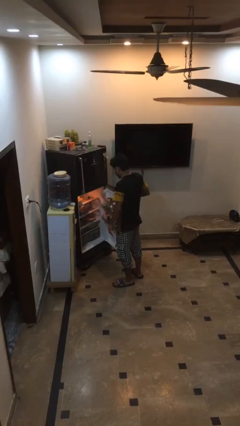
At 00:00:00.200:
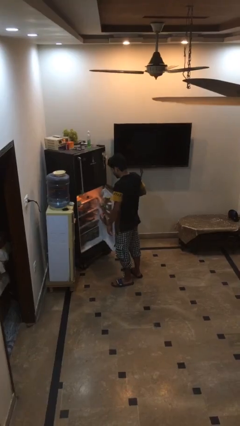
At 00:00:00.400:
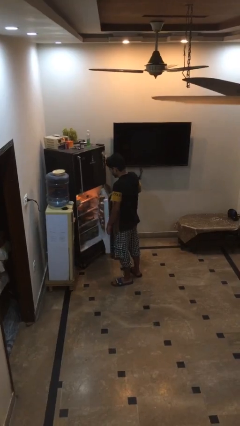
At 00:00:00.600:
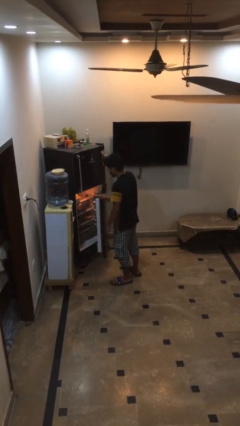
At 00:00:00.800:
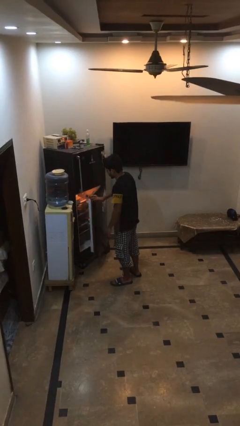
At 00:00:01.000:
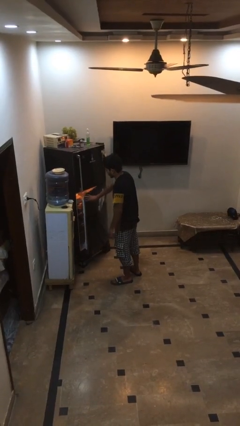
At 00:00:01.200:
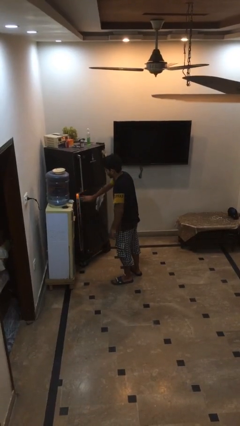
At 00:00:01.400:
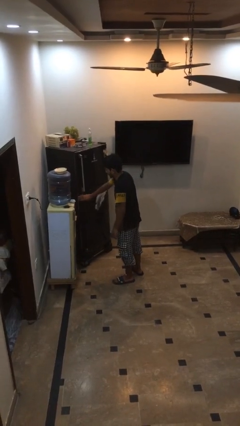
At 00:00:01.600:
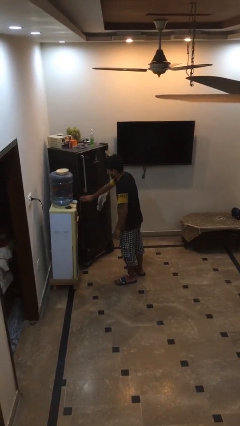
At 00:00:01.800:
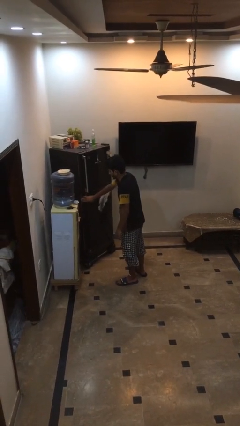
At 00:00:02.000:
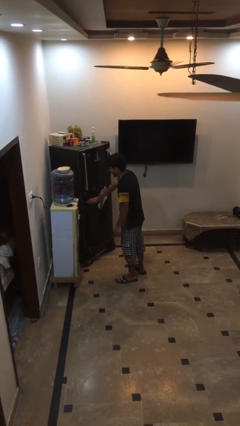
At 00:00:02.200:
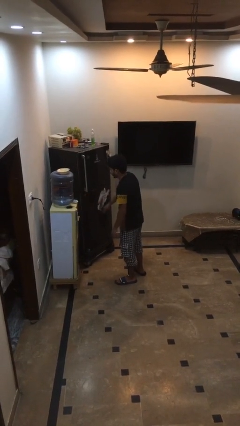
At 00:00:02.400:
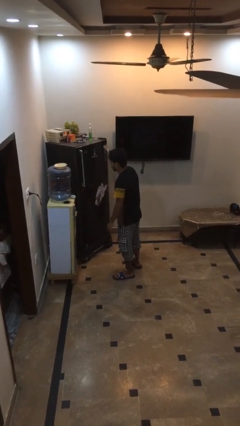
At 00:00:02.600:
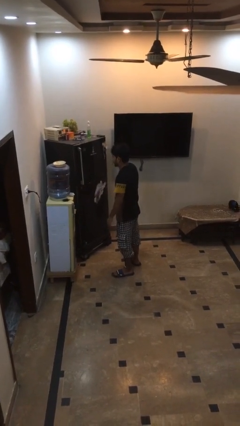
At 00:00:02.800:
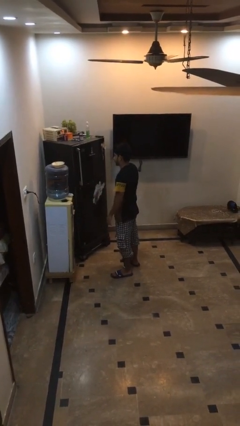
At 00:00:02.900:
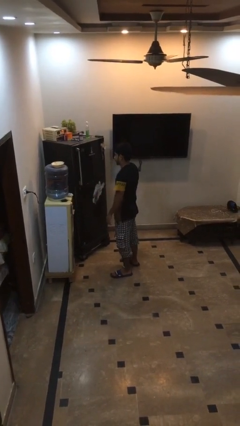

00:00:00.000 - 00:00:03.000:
person closes refrigerator

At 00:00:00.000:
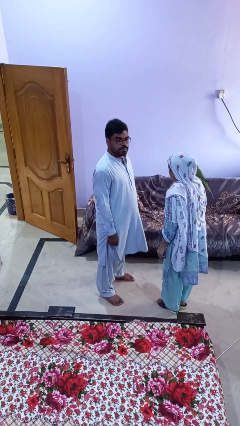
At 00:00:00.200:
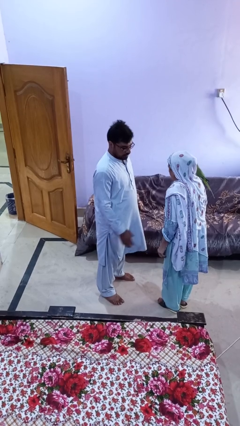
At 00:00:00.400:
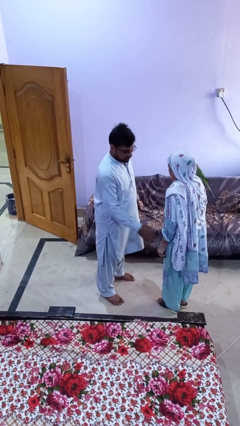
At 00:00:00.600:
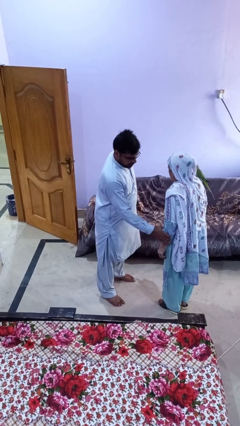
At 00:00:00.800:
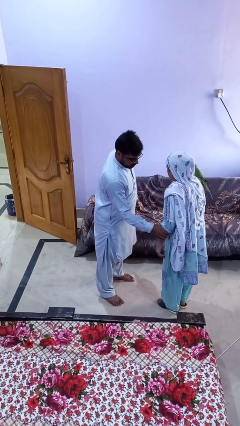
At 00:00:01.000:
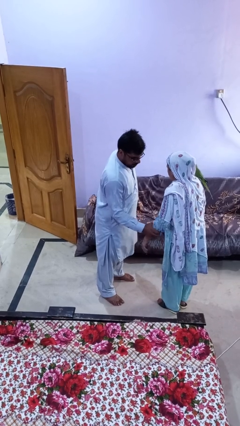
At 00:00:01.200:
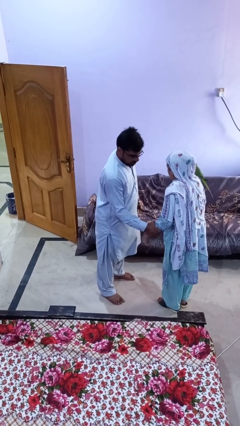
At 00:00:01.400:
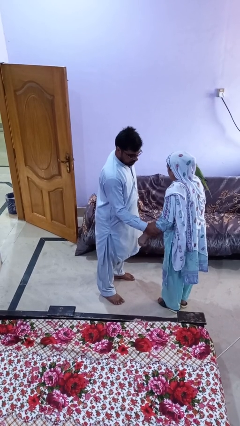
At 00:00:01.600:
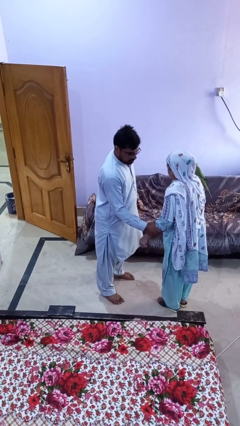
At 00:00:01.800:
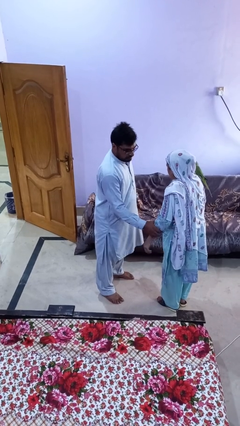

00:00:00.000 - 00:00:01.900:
person grabs person by forearm

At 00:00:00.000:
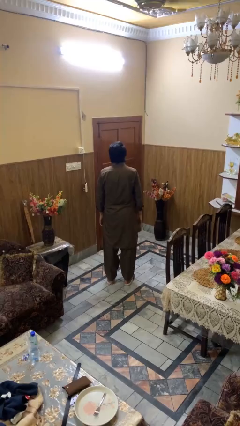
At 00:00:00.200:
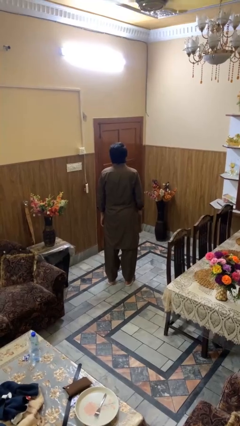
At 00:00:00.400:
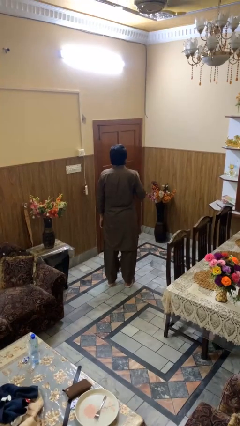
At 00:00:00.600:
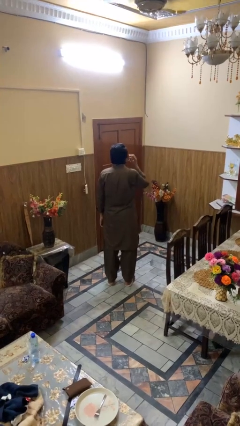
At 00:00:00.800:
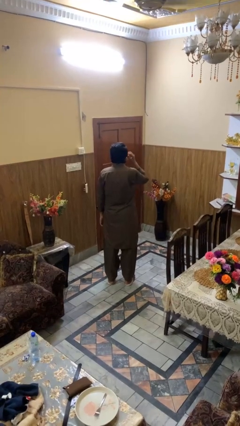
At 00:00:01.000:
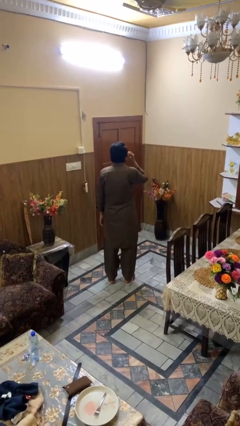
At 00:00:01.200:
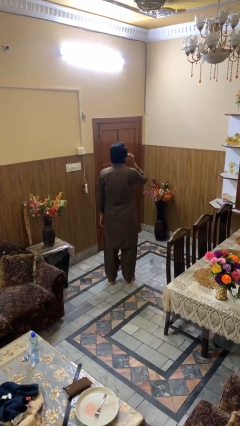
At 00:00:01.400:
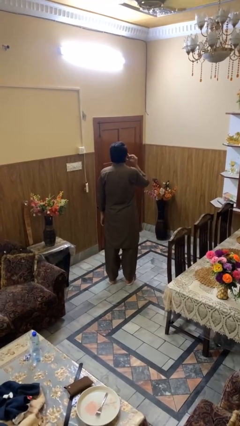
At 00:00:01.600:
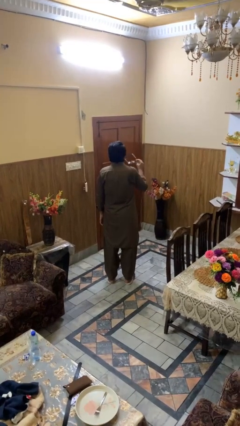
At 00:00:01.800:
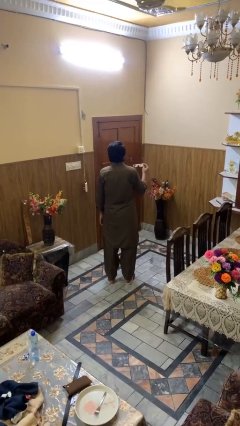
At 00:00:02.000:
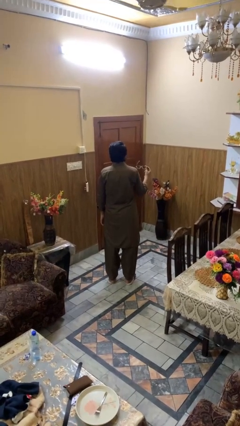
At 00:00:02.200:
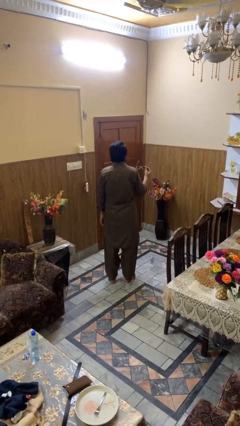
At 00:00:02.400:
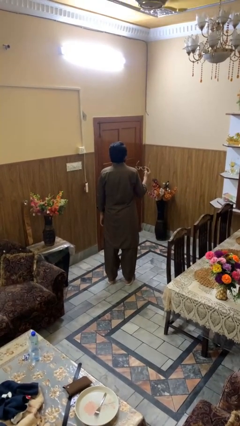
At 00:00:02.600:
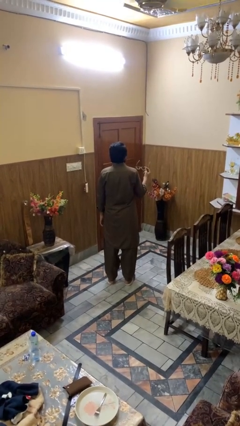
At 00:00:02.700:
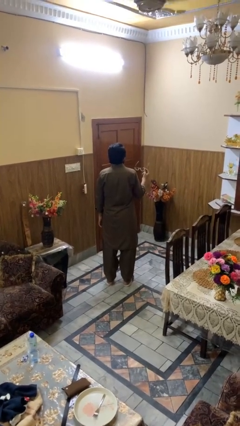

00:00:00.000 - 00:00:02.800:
person takes off sunglasses

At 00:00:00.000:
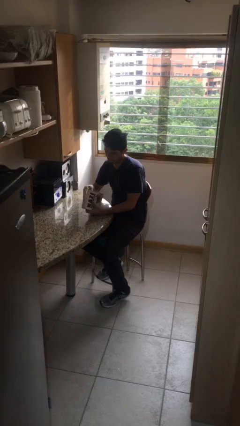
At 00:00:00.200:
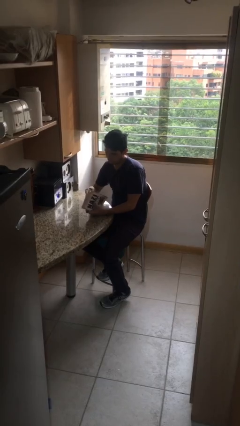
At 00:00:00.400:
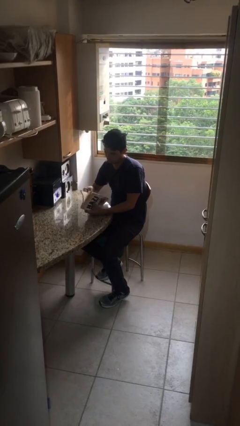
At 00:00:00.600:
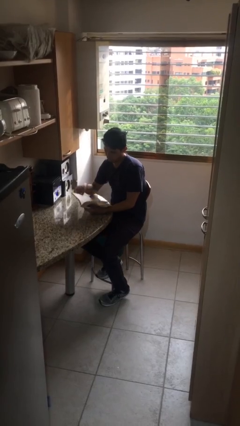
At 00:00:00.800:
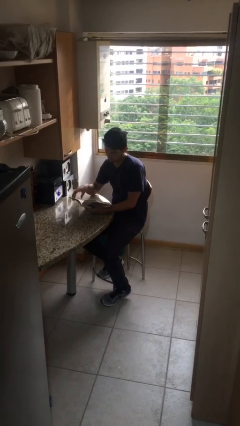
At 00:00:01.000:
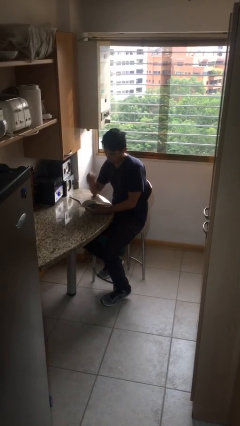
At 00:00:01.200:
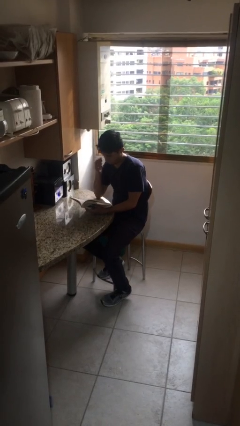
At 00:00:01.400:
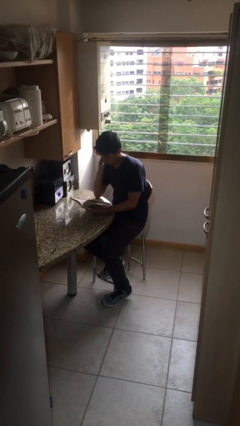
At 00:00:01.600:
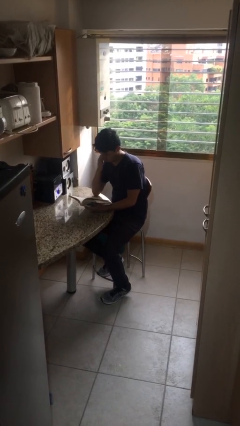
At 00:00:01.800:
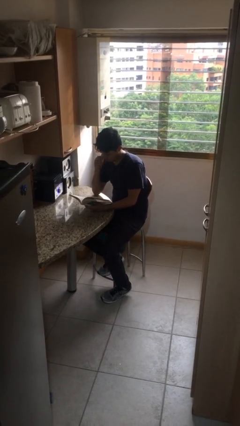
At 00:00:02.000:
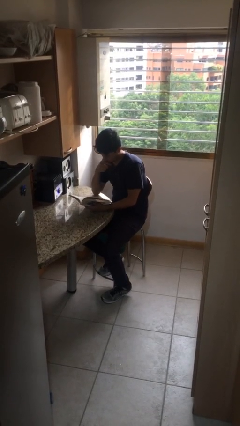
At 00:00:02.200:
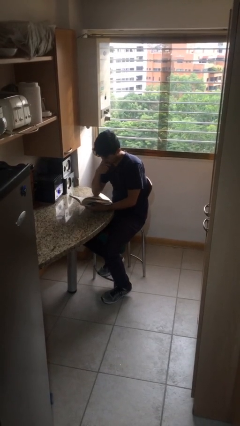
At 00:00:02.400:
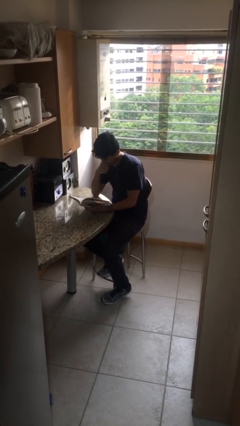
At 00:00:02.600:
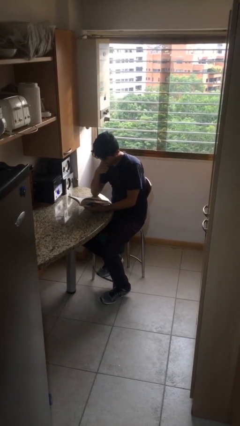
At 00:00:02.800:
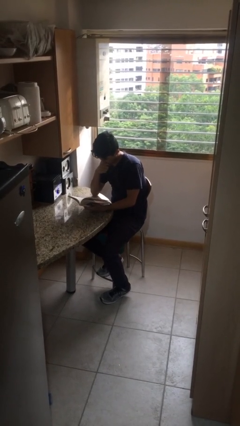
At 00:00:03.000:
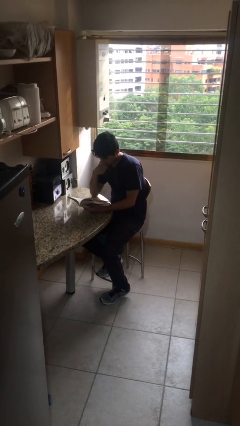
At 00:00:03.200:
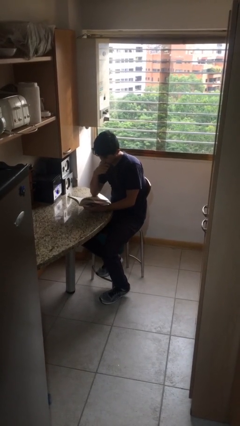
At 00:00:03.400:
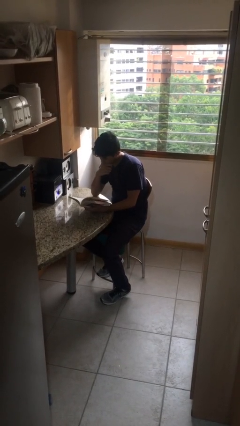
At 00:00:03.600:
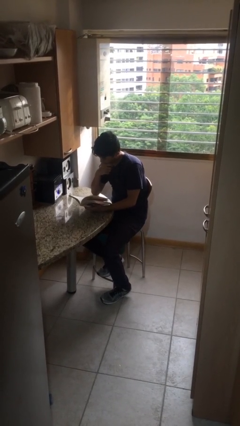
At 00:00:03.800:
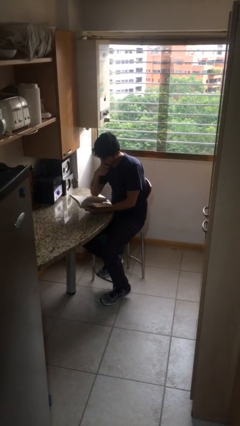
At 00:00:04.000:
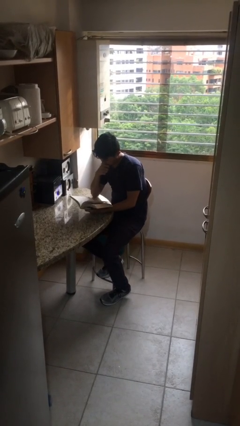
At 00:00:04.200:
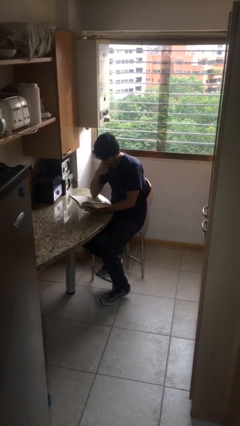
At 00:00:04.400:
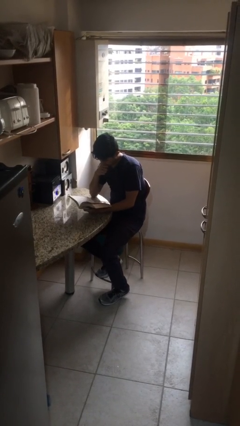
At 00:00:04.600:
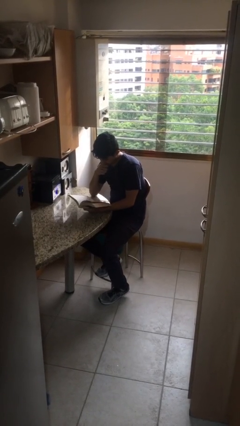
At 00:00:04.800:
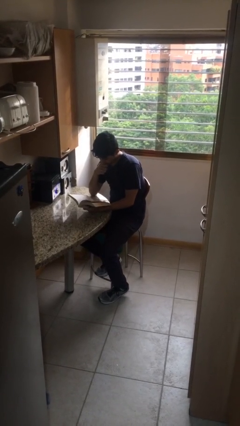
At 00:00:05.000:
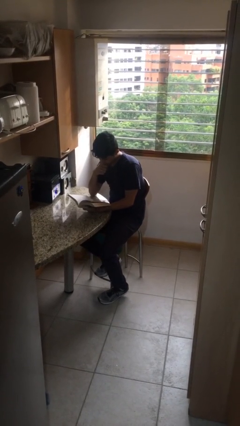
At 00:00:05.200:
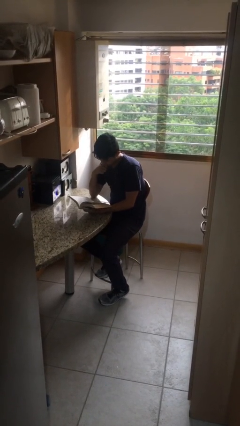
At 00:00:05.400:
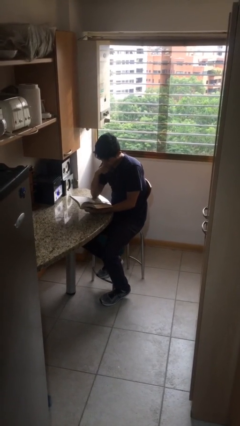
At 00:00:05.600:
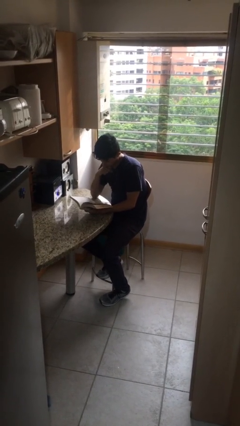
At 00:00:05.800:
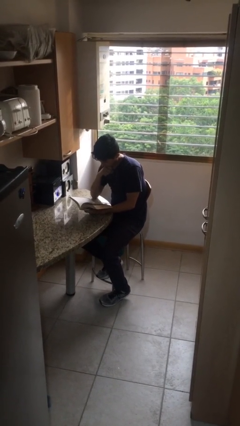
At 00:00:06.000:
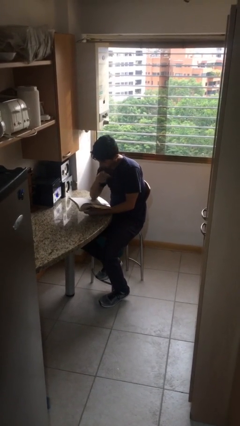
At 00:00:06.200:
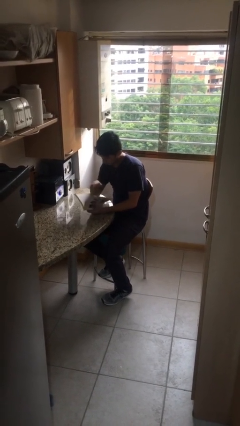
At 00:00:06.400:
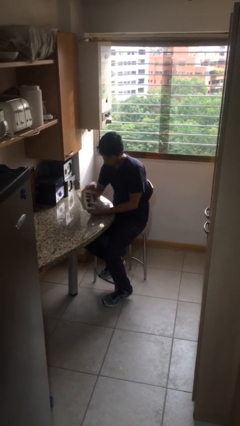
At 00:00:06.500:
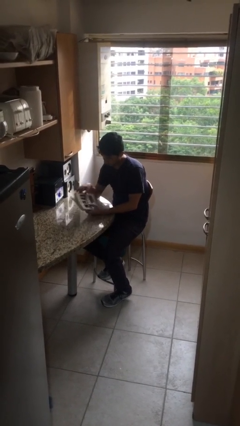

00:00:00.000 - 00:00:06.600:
person reads document

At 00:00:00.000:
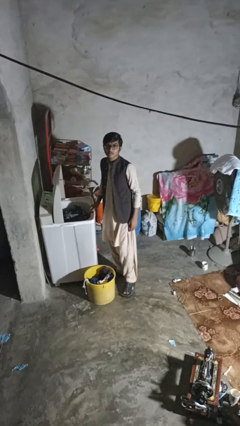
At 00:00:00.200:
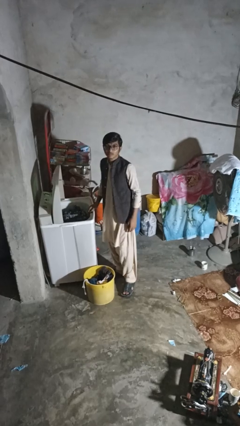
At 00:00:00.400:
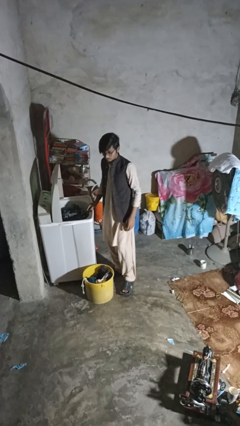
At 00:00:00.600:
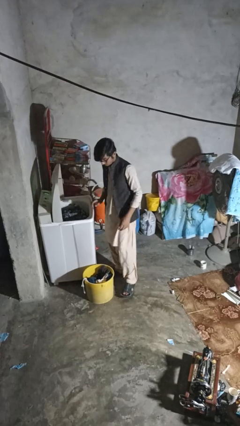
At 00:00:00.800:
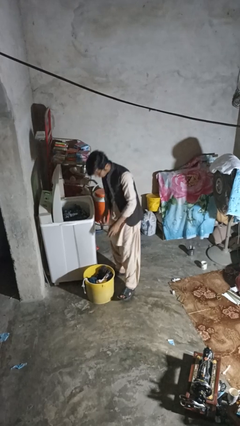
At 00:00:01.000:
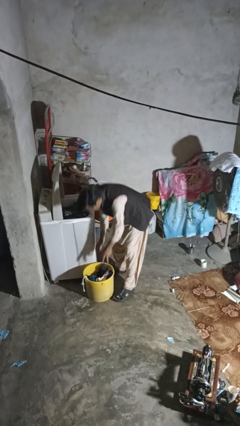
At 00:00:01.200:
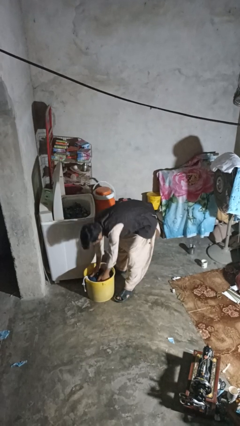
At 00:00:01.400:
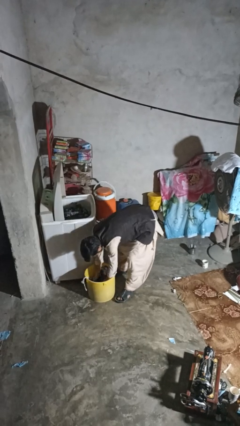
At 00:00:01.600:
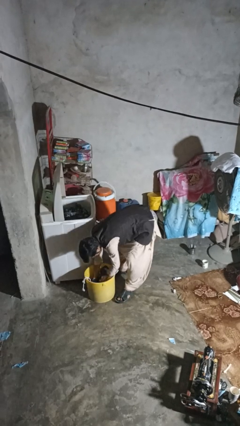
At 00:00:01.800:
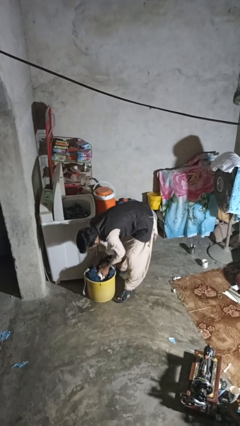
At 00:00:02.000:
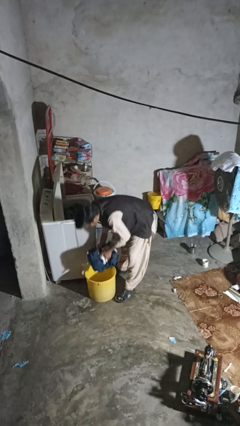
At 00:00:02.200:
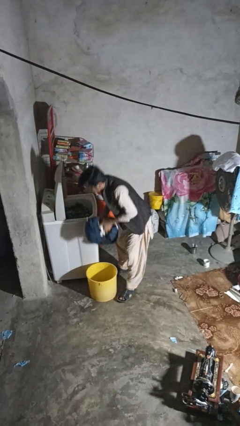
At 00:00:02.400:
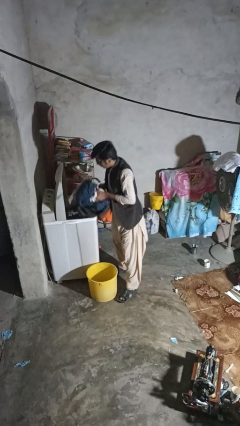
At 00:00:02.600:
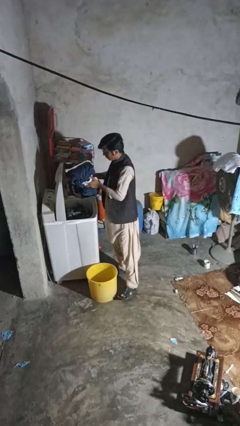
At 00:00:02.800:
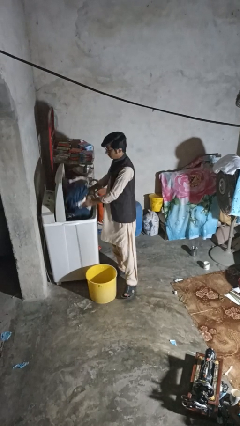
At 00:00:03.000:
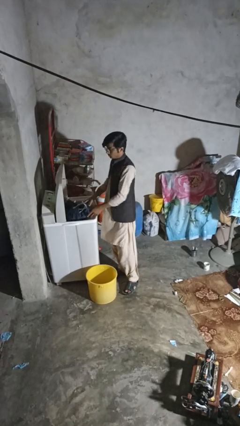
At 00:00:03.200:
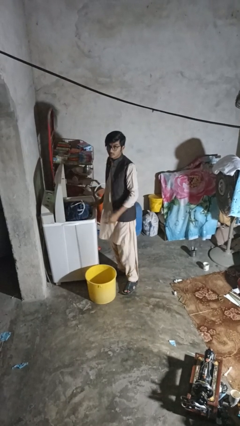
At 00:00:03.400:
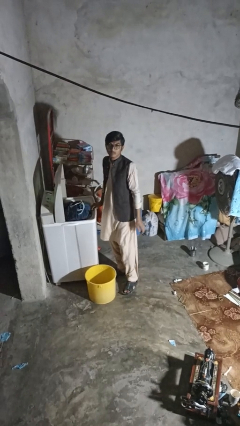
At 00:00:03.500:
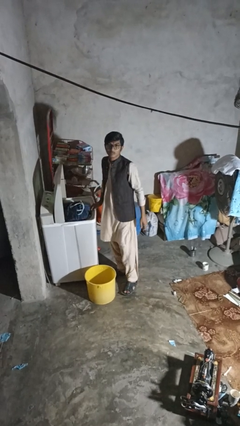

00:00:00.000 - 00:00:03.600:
person loads dryer
